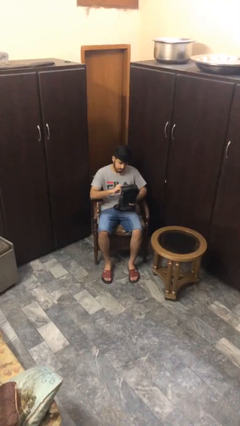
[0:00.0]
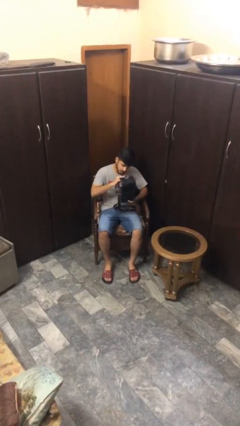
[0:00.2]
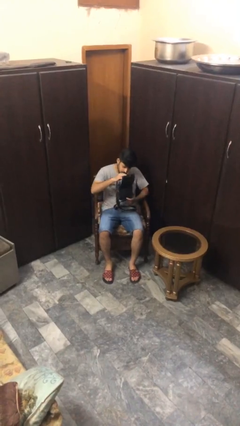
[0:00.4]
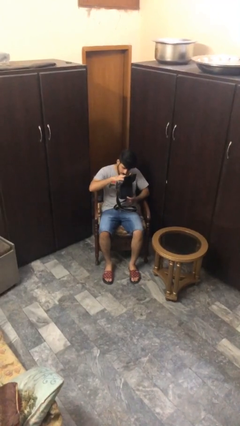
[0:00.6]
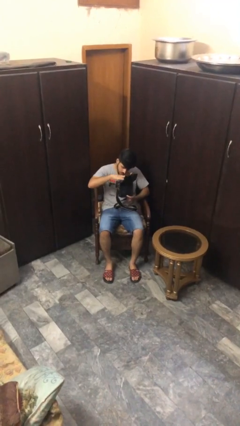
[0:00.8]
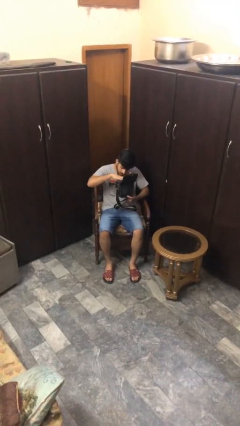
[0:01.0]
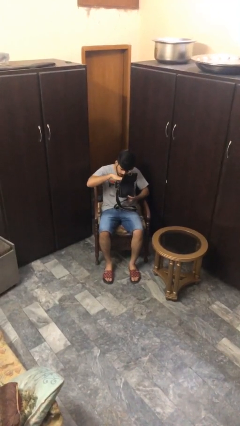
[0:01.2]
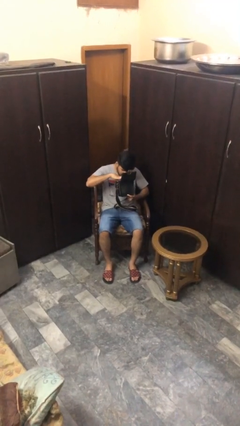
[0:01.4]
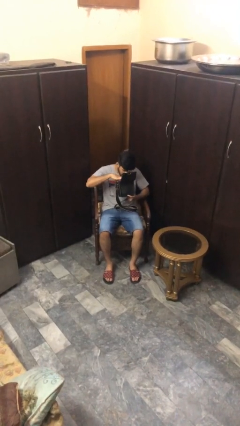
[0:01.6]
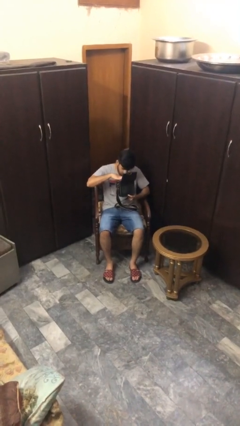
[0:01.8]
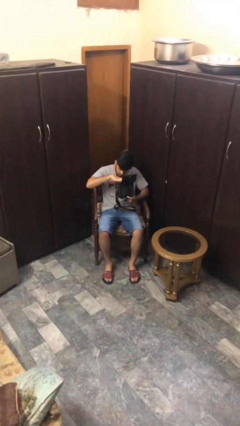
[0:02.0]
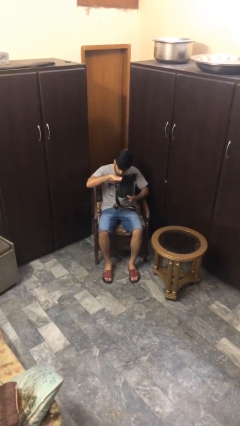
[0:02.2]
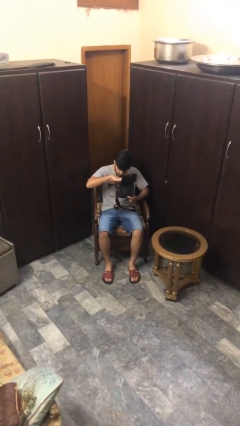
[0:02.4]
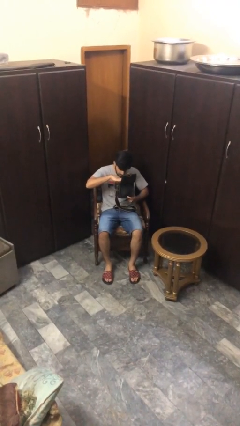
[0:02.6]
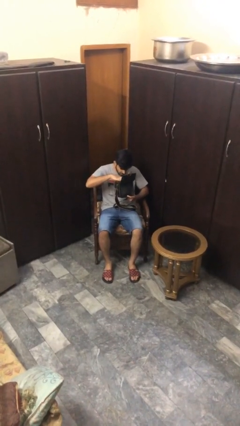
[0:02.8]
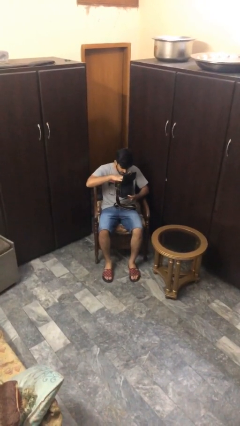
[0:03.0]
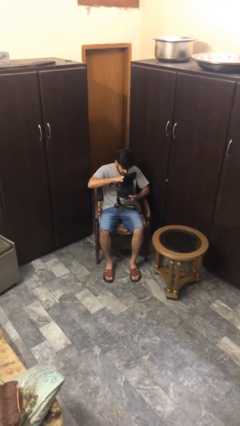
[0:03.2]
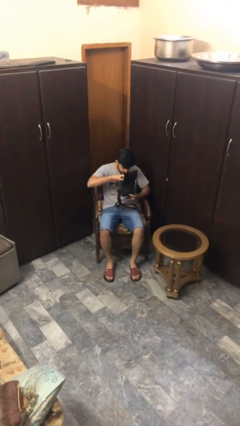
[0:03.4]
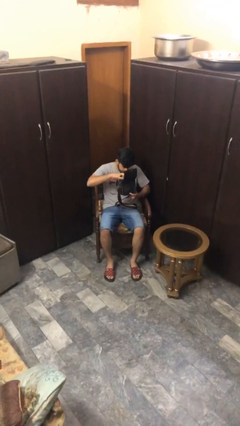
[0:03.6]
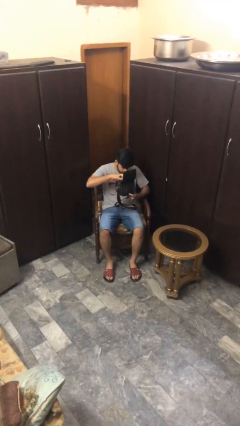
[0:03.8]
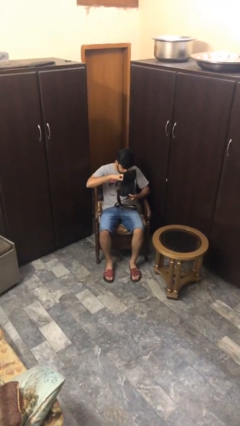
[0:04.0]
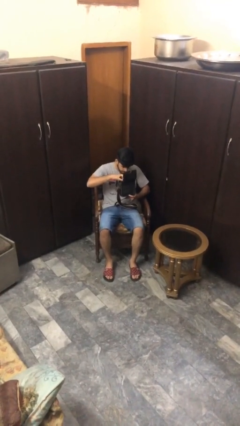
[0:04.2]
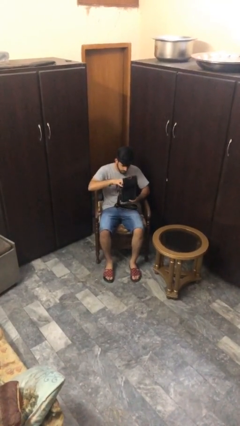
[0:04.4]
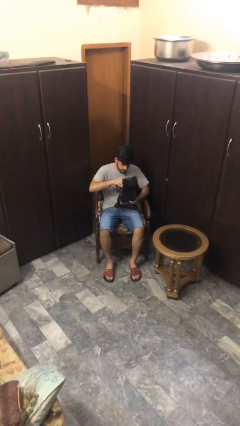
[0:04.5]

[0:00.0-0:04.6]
person searches in purse

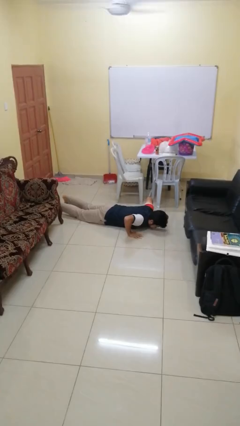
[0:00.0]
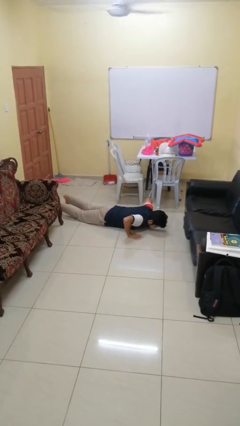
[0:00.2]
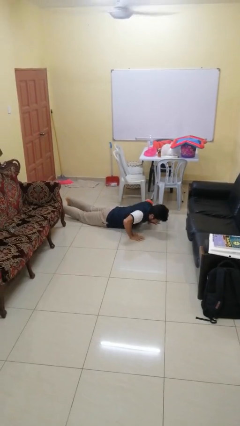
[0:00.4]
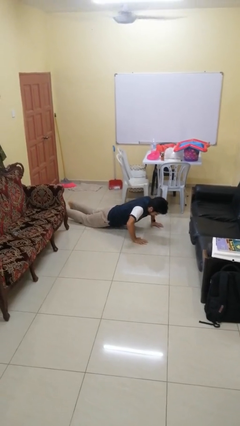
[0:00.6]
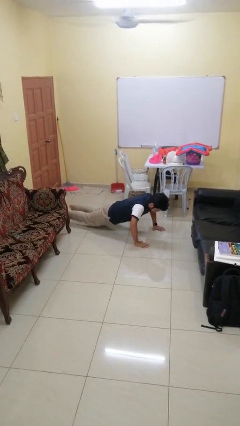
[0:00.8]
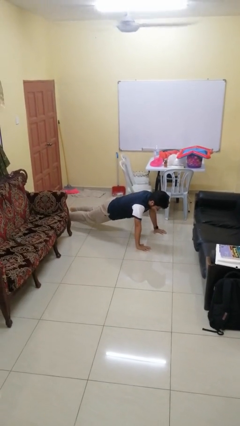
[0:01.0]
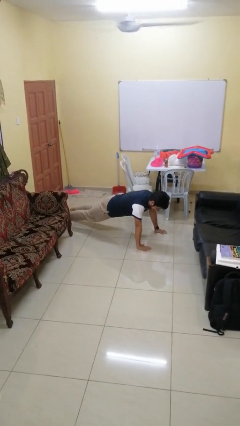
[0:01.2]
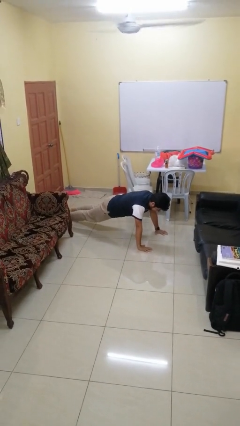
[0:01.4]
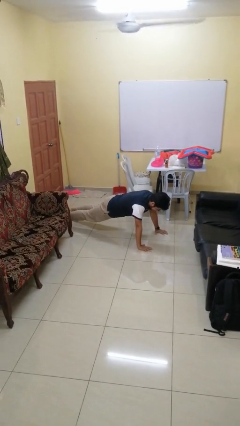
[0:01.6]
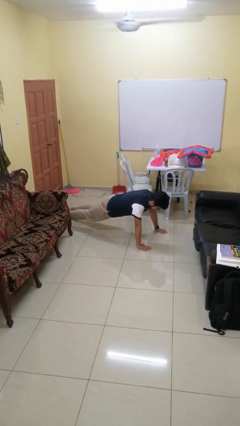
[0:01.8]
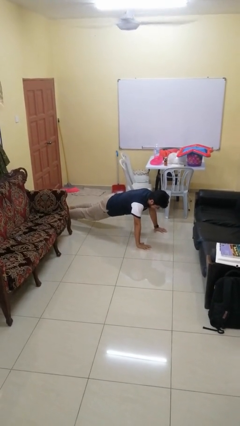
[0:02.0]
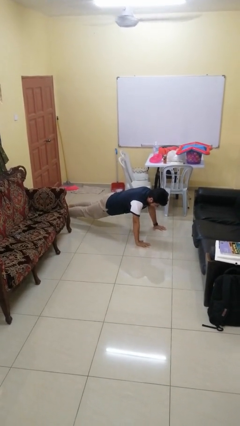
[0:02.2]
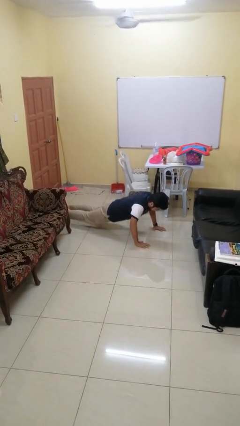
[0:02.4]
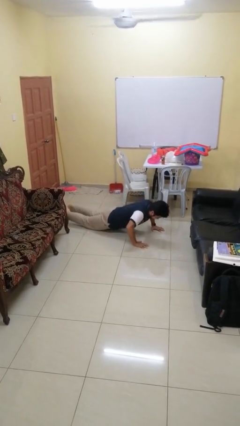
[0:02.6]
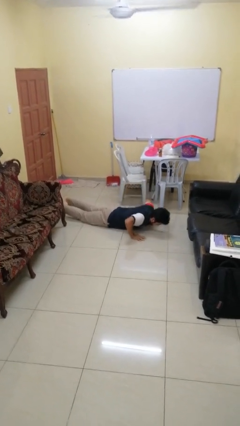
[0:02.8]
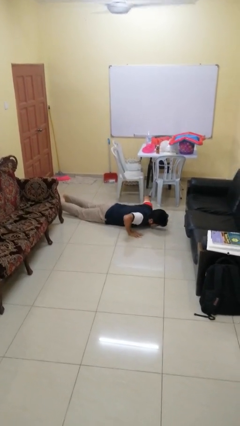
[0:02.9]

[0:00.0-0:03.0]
person exercises with pushup

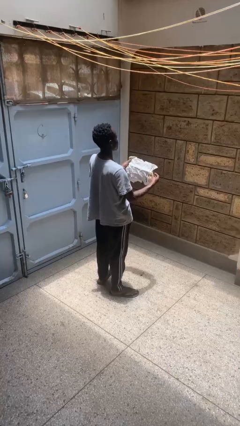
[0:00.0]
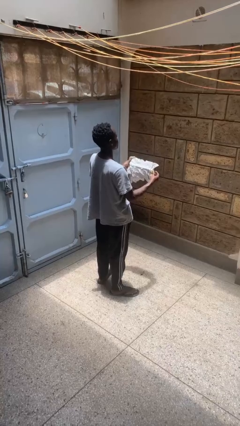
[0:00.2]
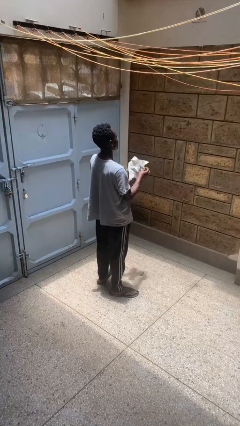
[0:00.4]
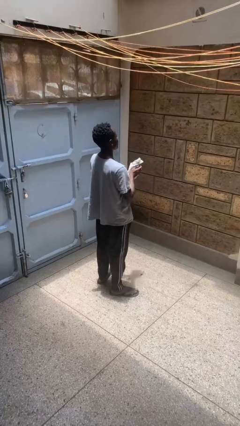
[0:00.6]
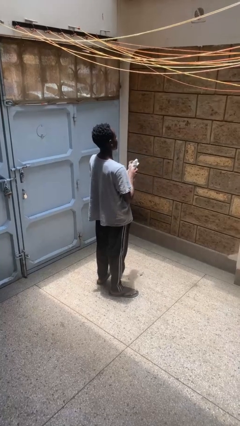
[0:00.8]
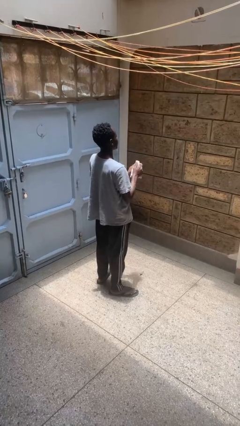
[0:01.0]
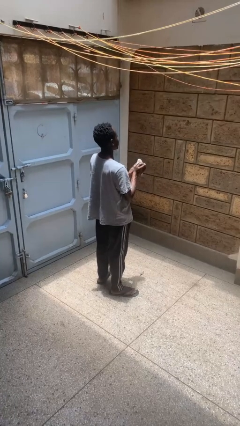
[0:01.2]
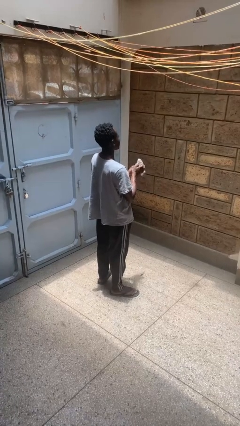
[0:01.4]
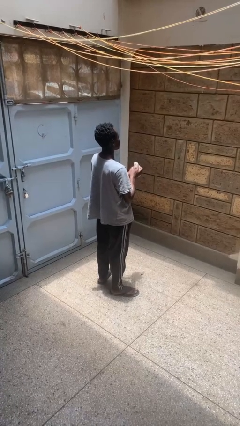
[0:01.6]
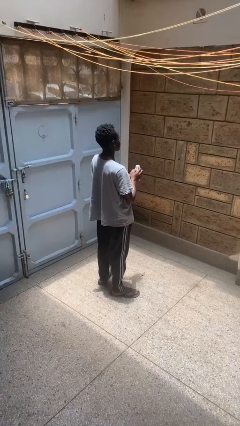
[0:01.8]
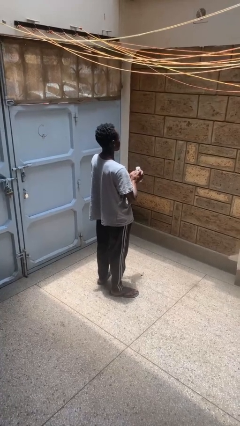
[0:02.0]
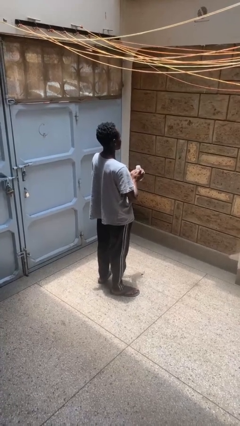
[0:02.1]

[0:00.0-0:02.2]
person crumples paper

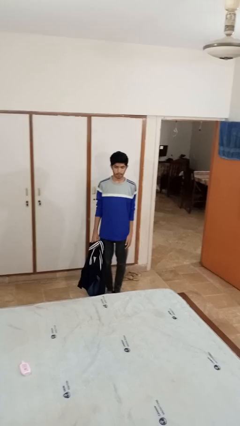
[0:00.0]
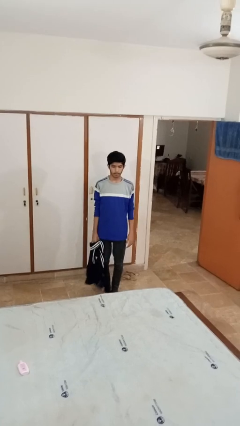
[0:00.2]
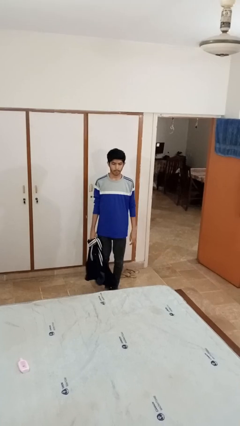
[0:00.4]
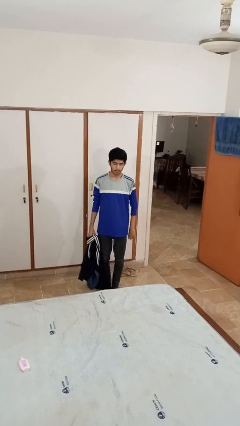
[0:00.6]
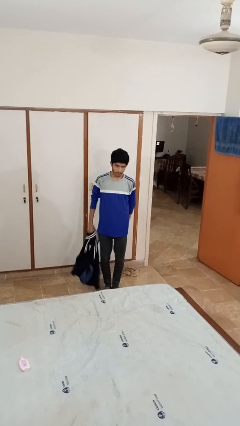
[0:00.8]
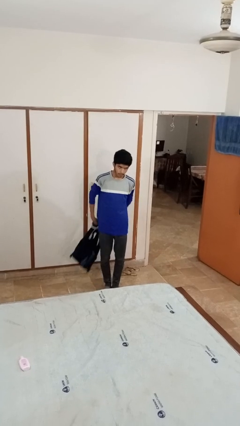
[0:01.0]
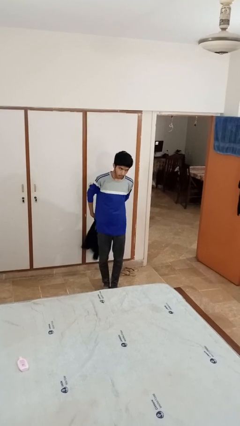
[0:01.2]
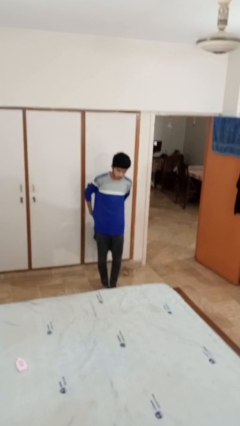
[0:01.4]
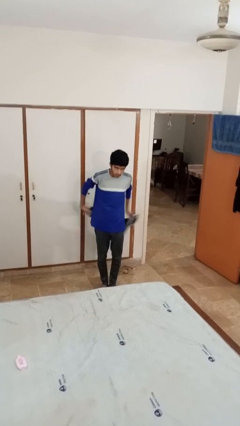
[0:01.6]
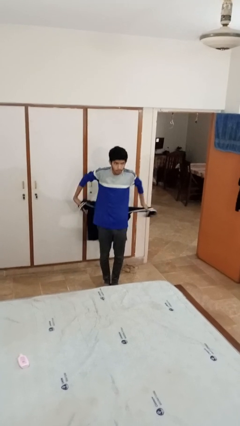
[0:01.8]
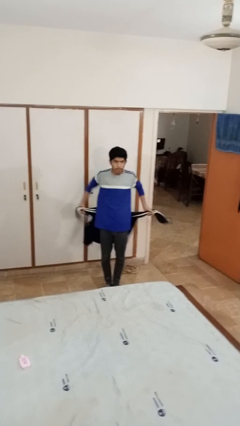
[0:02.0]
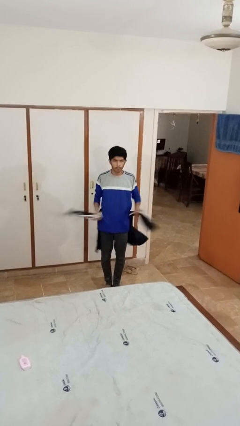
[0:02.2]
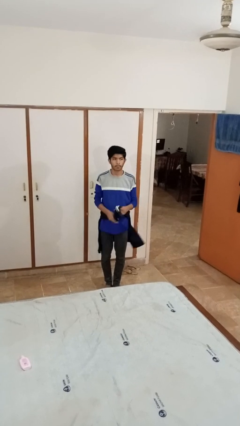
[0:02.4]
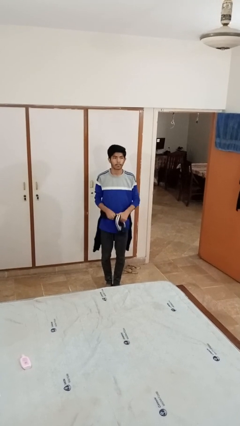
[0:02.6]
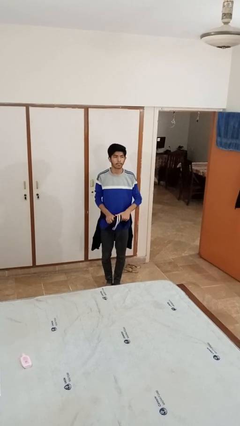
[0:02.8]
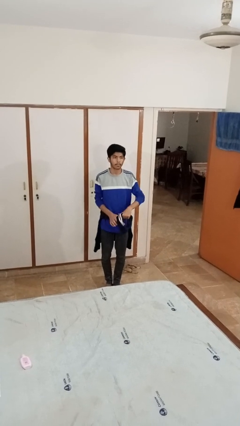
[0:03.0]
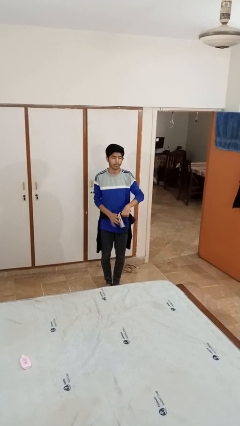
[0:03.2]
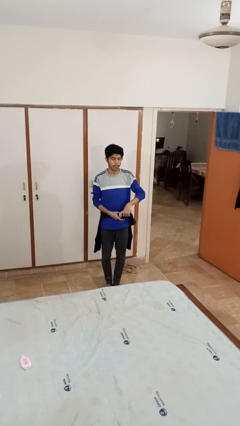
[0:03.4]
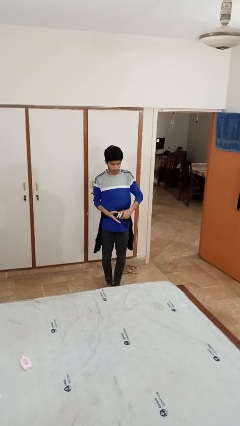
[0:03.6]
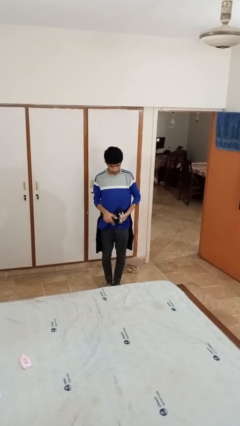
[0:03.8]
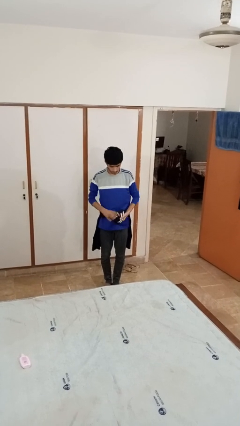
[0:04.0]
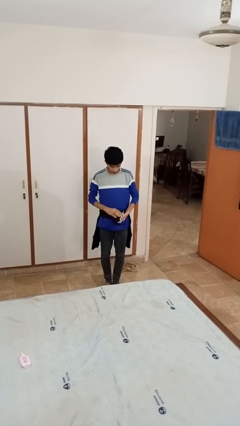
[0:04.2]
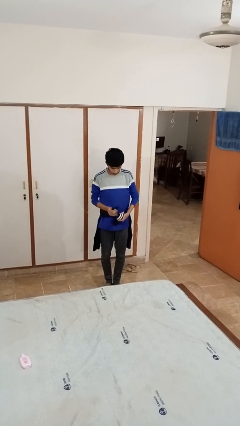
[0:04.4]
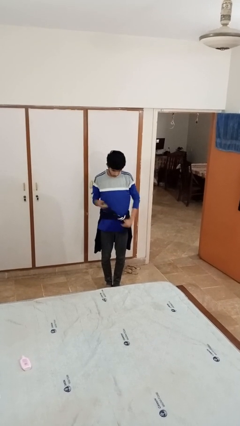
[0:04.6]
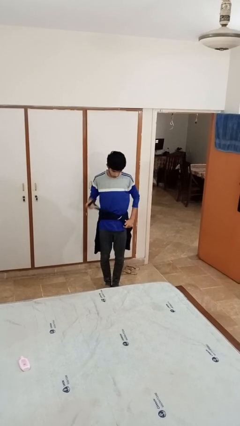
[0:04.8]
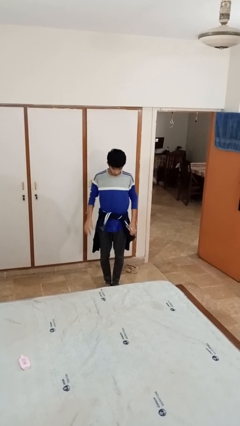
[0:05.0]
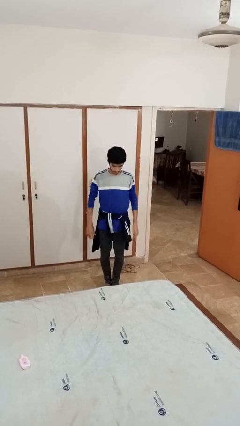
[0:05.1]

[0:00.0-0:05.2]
person ties jacket around waist

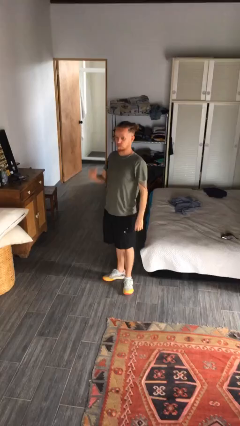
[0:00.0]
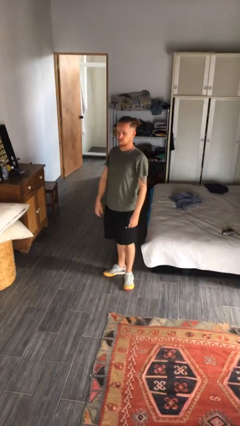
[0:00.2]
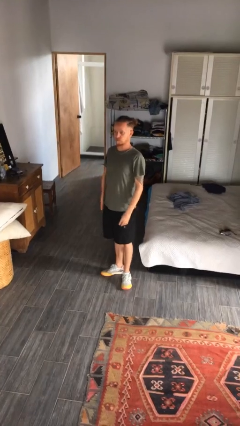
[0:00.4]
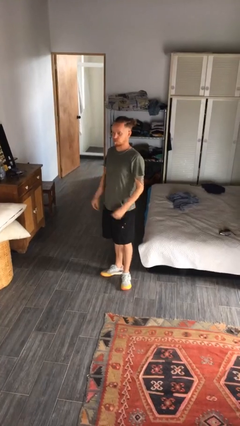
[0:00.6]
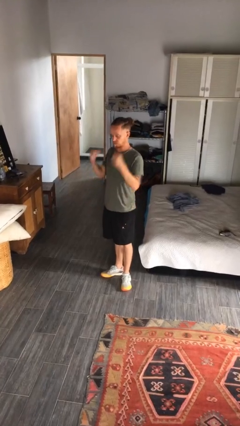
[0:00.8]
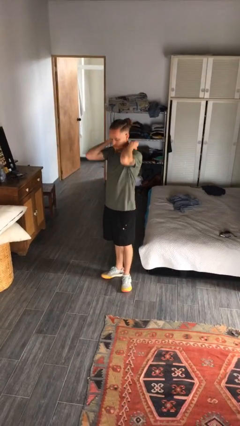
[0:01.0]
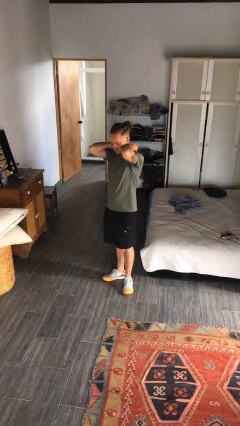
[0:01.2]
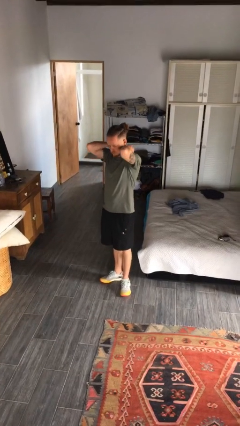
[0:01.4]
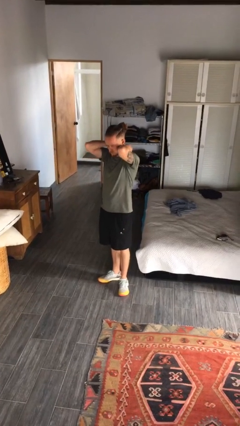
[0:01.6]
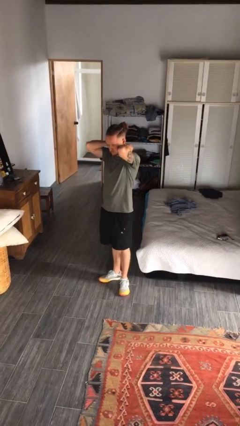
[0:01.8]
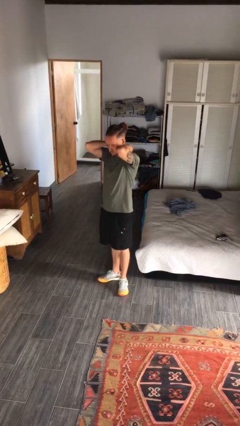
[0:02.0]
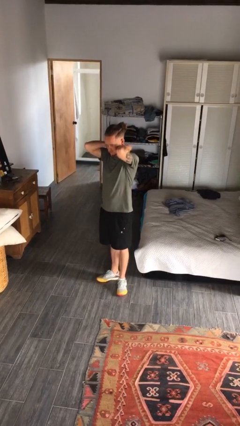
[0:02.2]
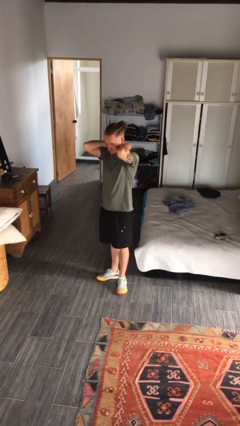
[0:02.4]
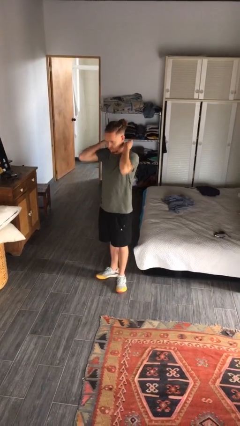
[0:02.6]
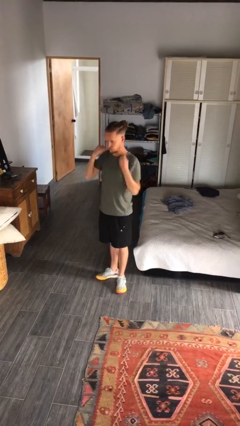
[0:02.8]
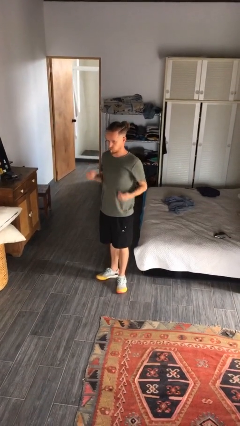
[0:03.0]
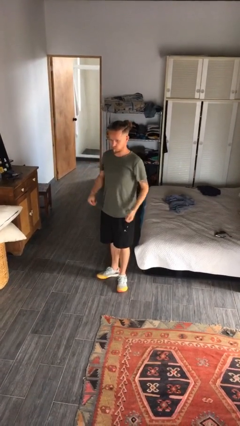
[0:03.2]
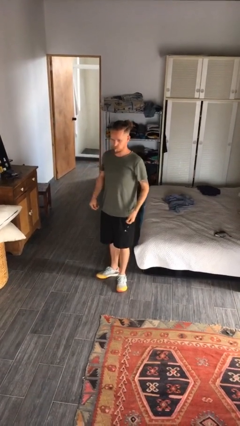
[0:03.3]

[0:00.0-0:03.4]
person takes off necklace
